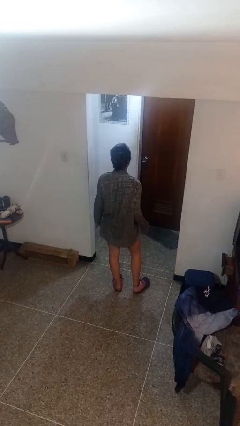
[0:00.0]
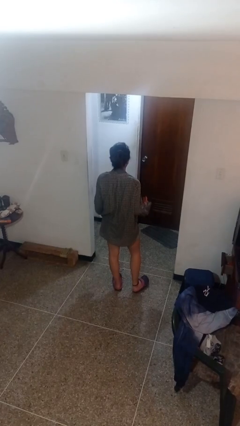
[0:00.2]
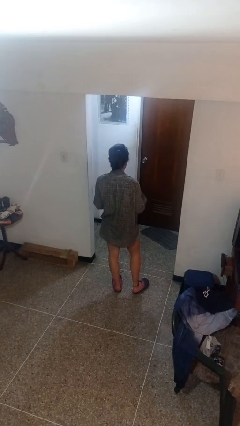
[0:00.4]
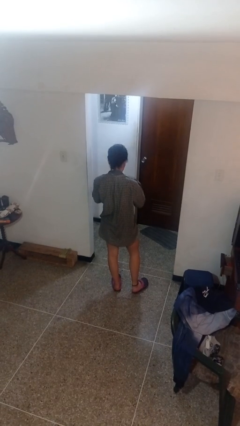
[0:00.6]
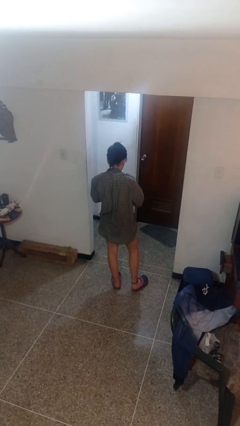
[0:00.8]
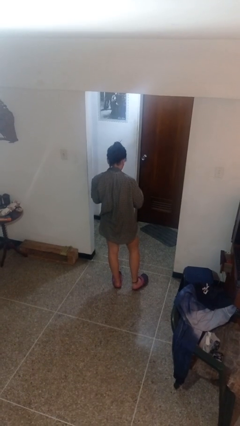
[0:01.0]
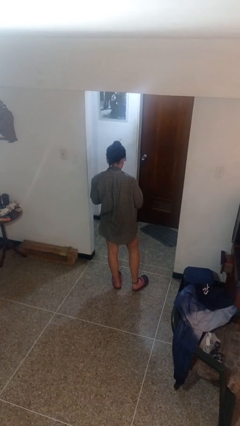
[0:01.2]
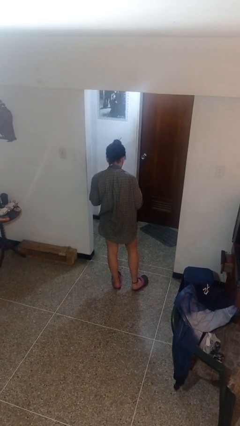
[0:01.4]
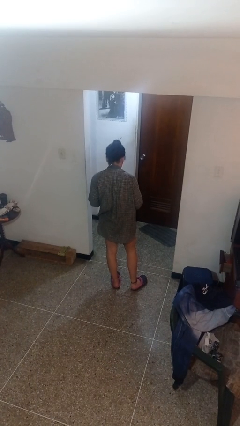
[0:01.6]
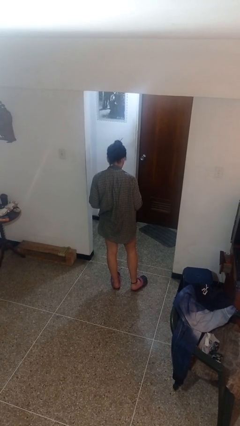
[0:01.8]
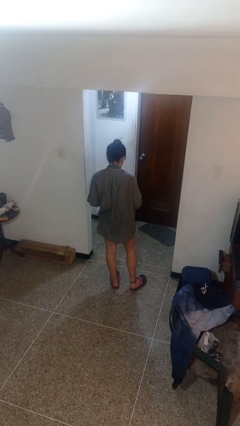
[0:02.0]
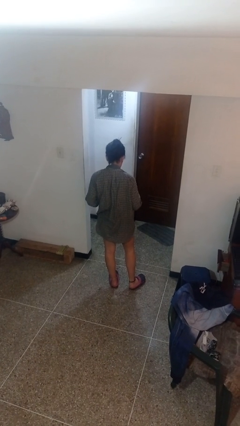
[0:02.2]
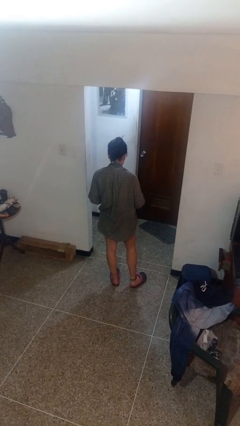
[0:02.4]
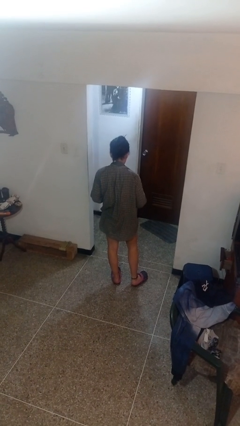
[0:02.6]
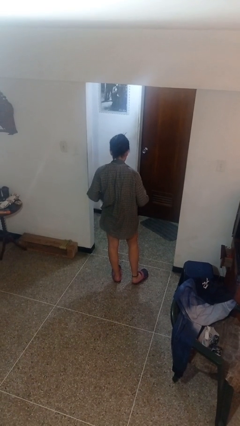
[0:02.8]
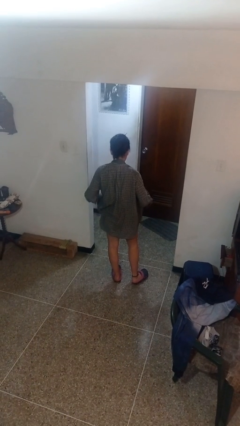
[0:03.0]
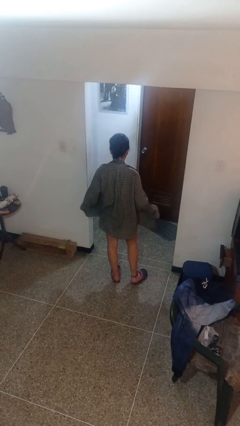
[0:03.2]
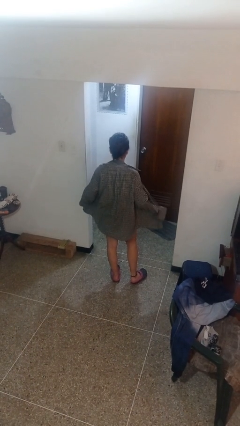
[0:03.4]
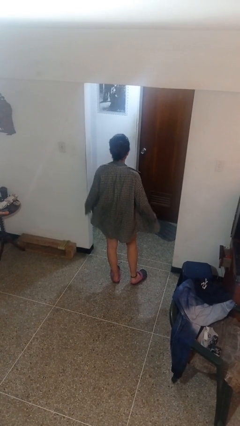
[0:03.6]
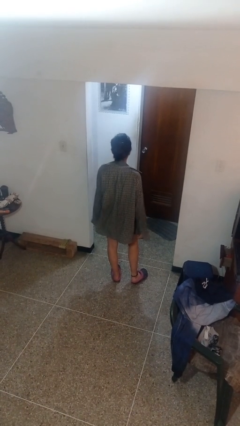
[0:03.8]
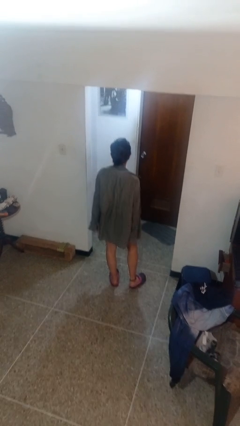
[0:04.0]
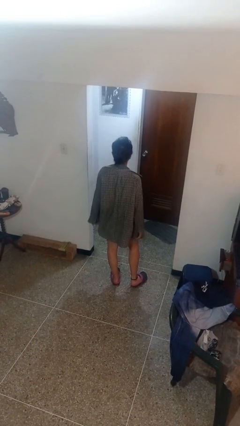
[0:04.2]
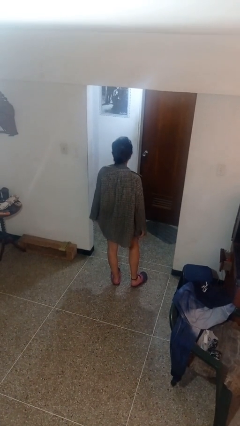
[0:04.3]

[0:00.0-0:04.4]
person unbuttons shirt

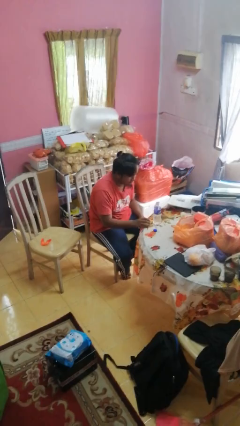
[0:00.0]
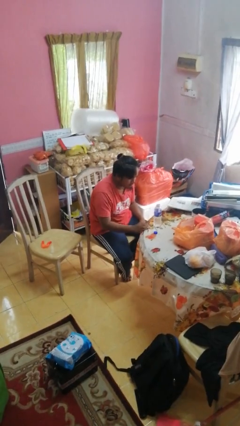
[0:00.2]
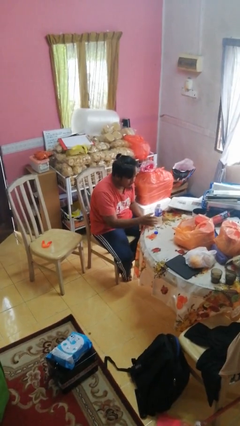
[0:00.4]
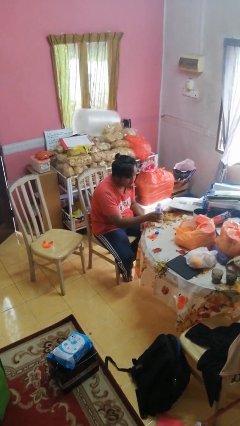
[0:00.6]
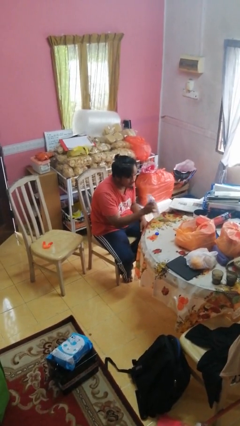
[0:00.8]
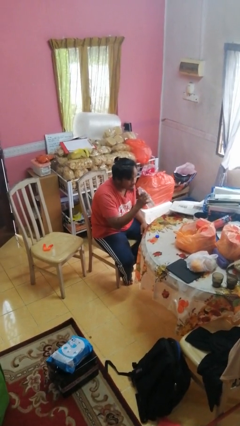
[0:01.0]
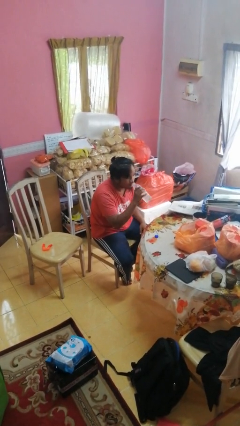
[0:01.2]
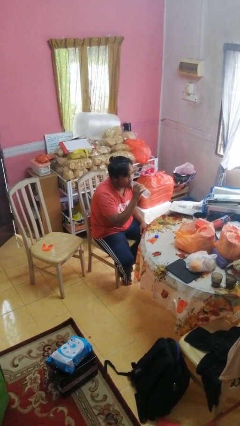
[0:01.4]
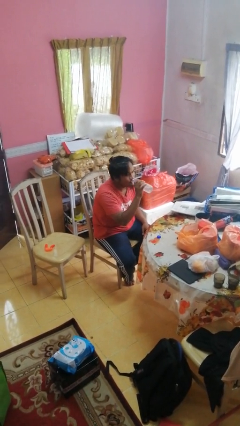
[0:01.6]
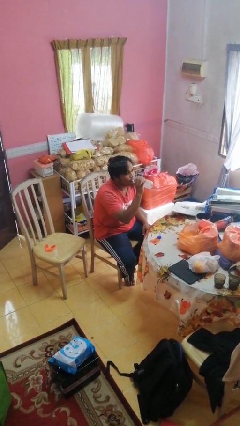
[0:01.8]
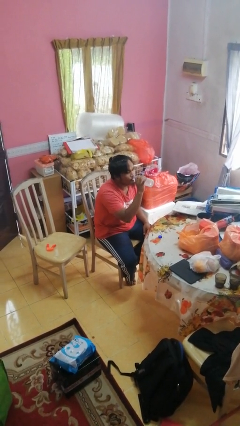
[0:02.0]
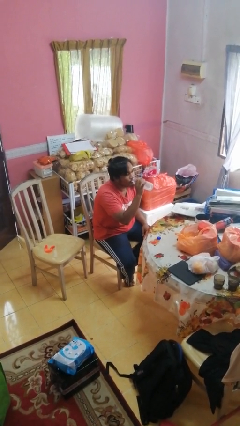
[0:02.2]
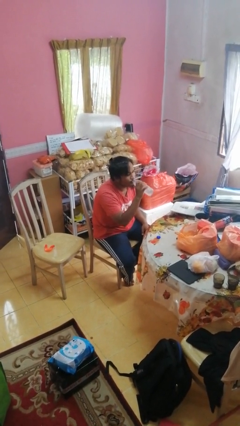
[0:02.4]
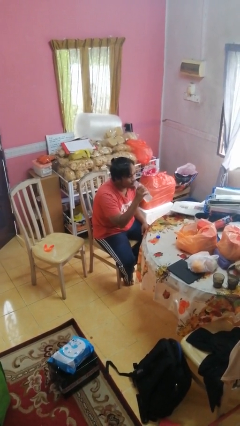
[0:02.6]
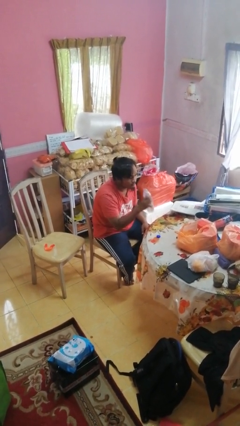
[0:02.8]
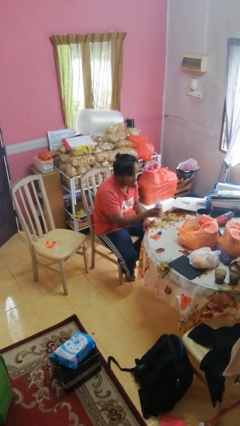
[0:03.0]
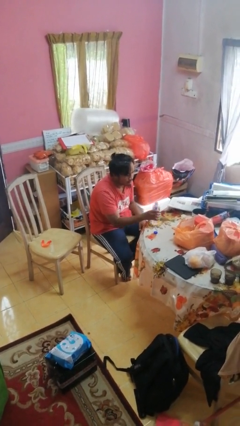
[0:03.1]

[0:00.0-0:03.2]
person drinks from bottle

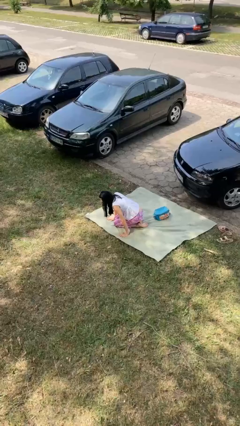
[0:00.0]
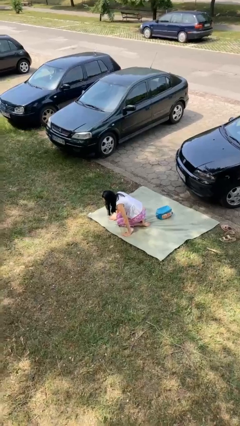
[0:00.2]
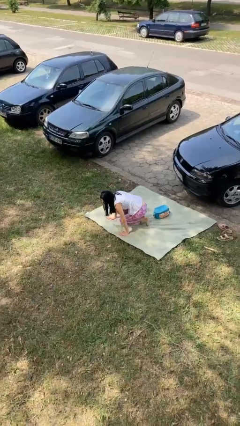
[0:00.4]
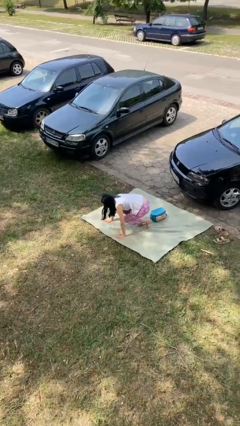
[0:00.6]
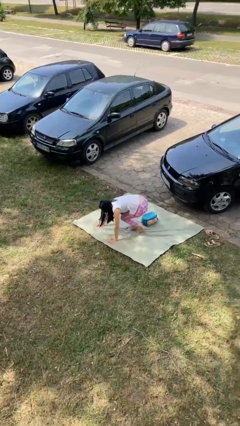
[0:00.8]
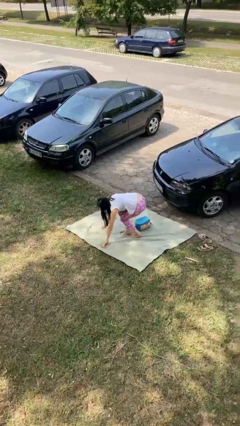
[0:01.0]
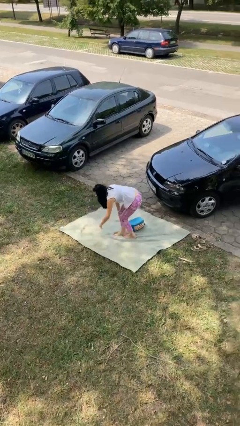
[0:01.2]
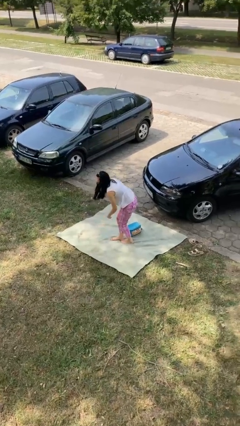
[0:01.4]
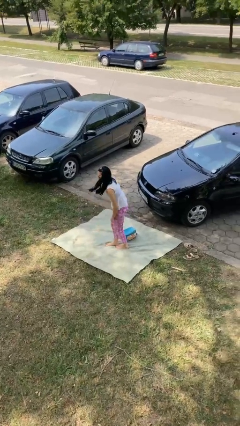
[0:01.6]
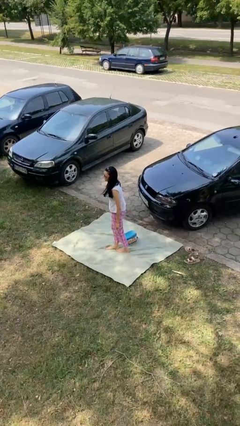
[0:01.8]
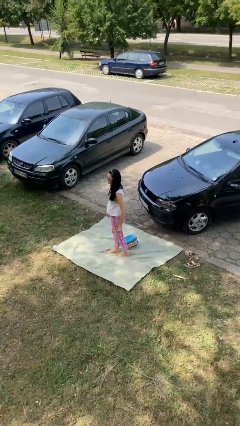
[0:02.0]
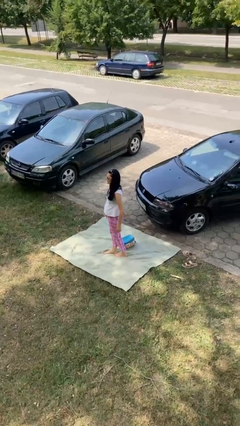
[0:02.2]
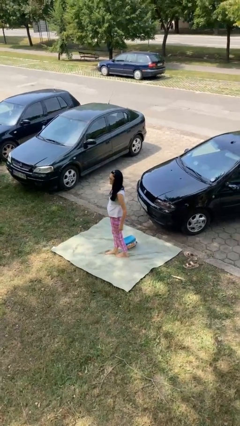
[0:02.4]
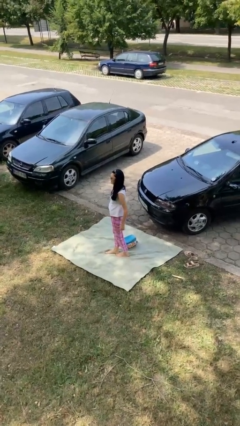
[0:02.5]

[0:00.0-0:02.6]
person stands up from floor

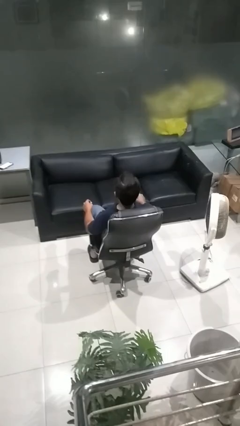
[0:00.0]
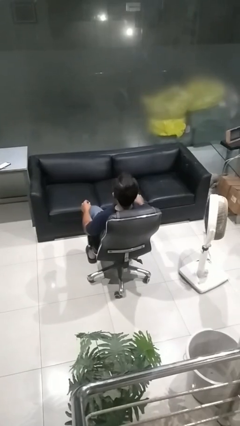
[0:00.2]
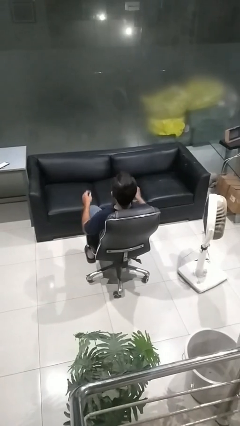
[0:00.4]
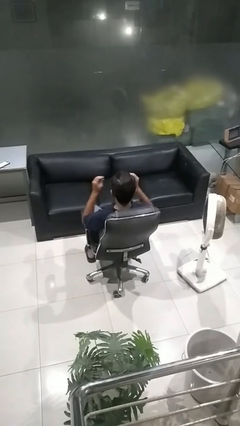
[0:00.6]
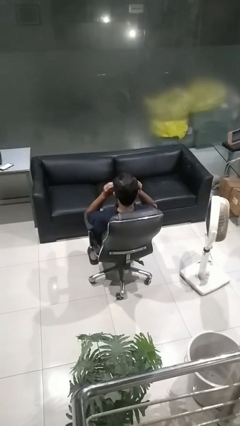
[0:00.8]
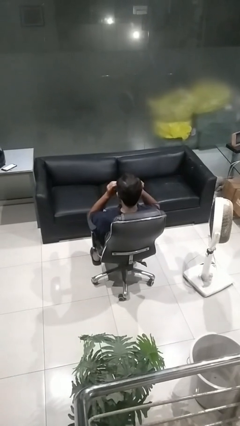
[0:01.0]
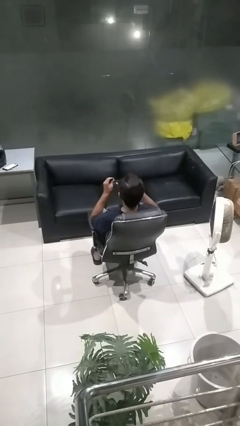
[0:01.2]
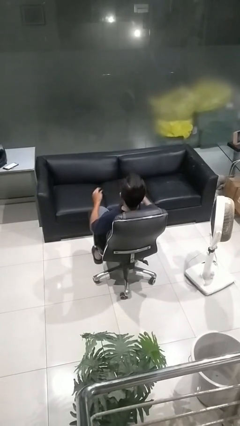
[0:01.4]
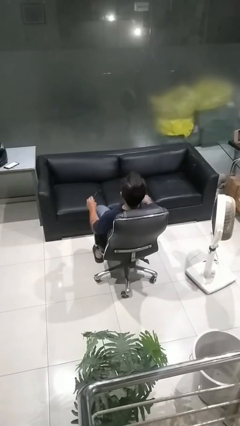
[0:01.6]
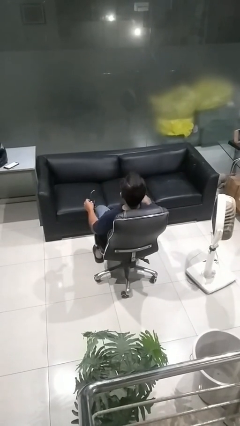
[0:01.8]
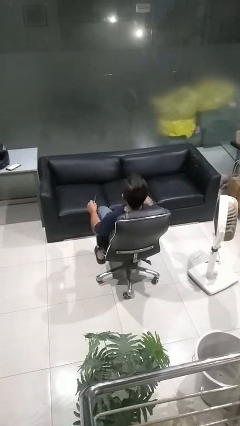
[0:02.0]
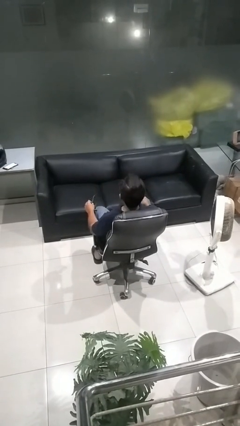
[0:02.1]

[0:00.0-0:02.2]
person takes off sunglasses

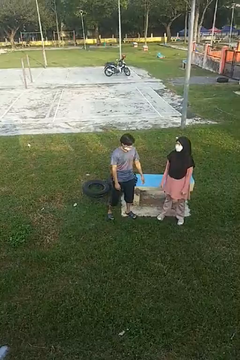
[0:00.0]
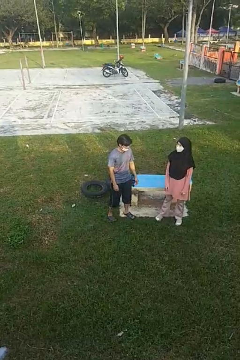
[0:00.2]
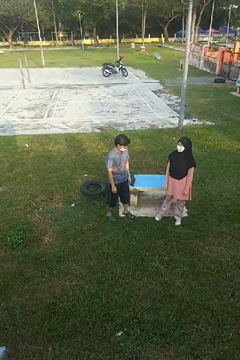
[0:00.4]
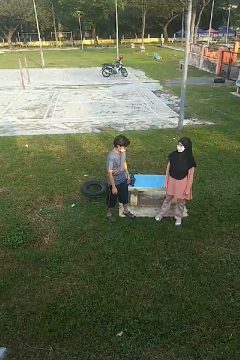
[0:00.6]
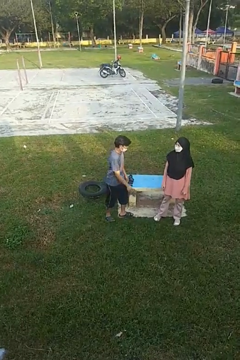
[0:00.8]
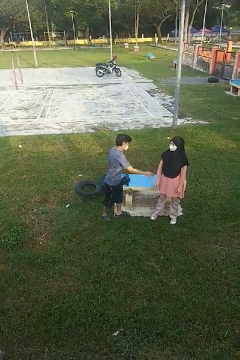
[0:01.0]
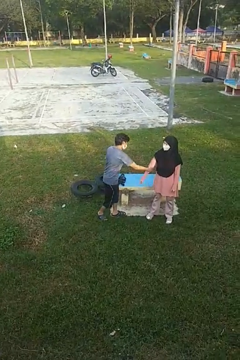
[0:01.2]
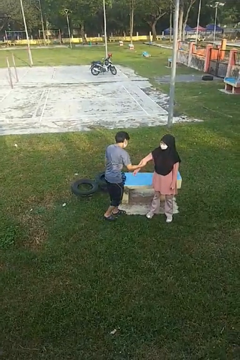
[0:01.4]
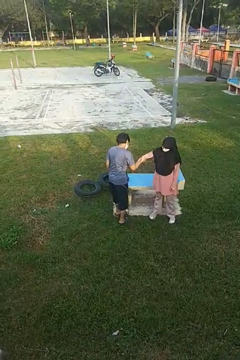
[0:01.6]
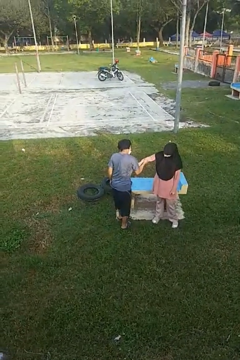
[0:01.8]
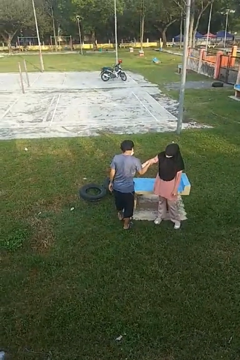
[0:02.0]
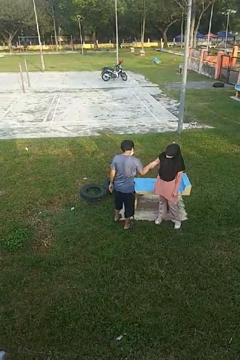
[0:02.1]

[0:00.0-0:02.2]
person grabs person by forearm

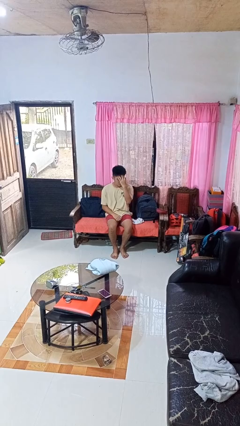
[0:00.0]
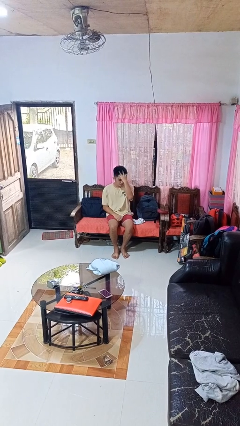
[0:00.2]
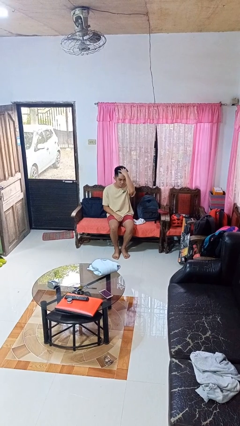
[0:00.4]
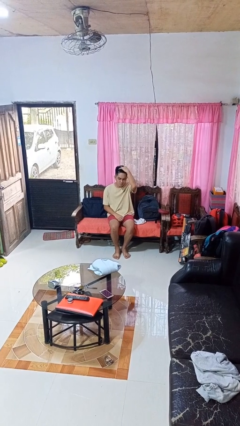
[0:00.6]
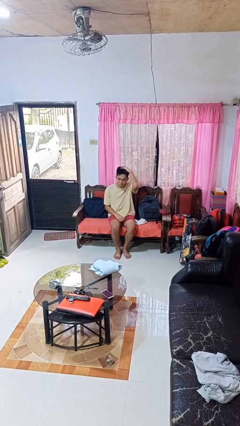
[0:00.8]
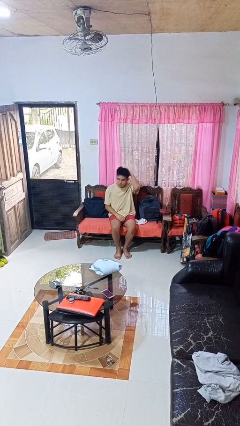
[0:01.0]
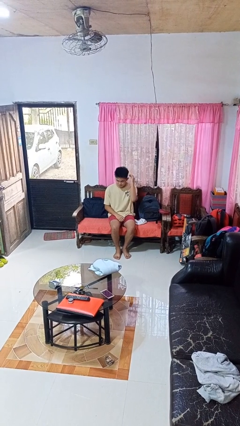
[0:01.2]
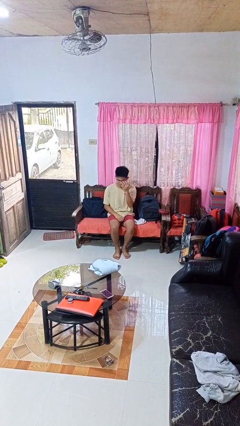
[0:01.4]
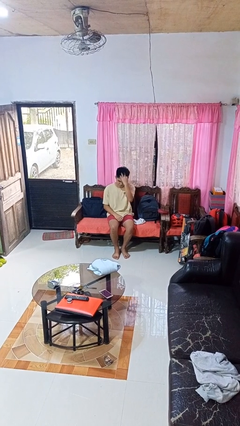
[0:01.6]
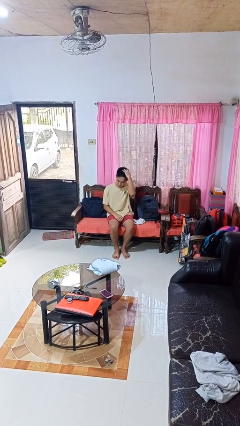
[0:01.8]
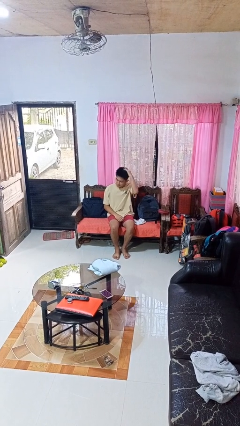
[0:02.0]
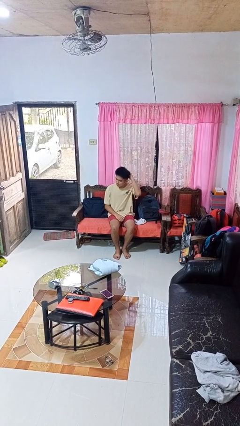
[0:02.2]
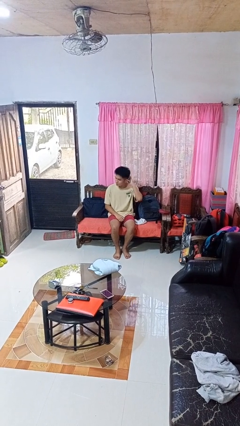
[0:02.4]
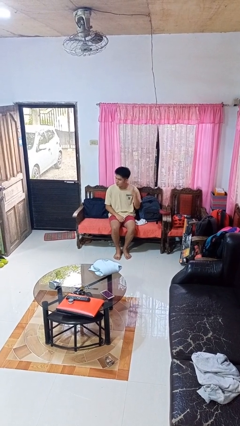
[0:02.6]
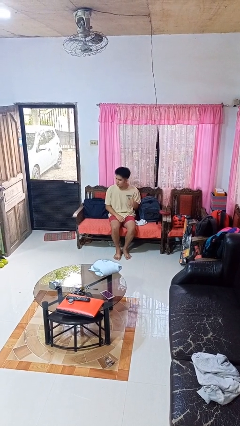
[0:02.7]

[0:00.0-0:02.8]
person strokes hair

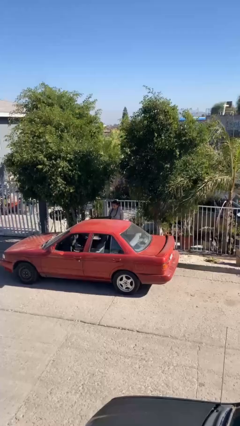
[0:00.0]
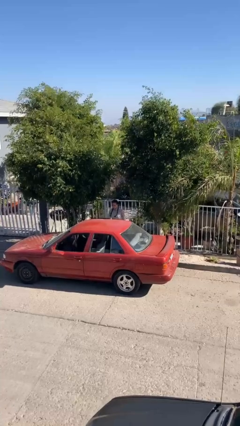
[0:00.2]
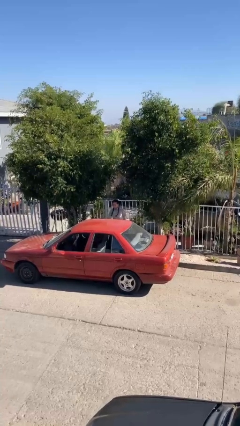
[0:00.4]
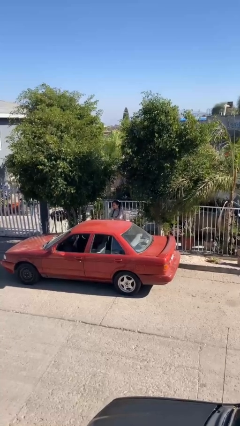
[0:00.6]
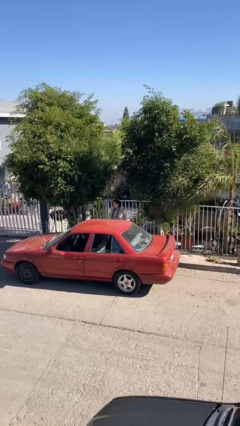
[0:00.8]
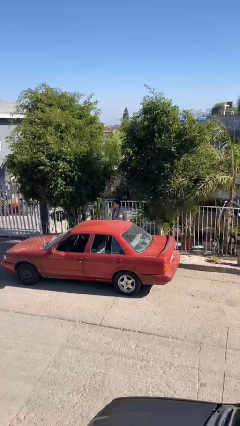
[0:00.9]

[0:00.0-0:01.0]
person closes car door
